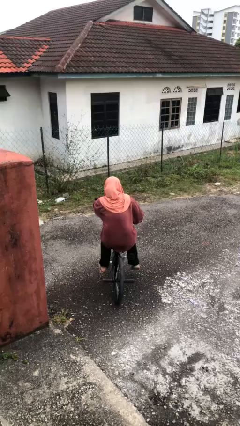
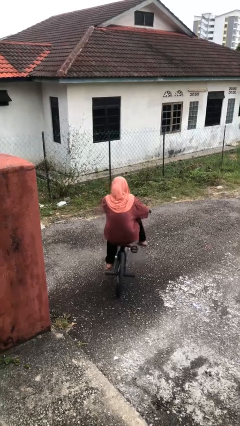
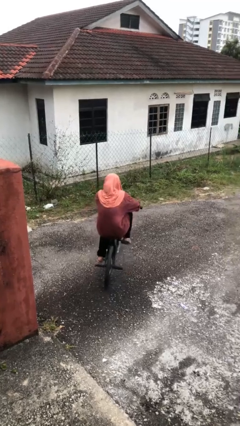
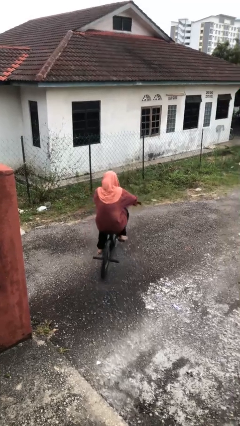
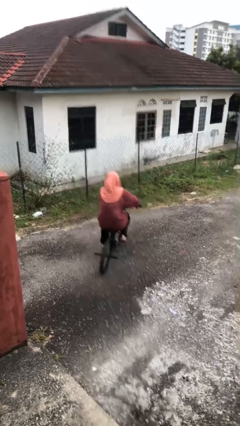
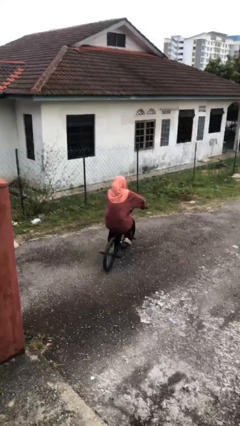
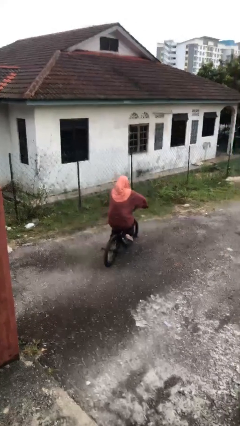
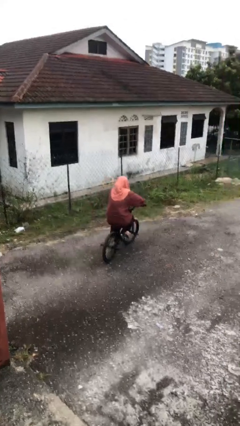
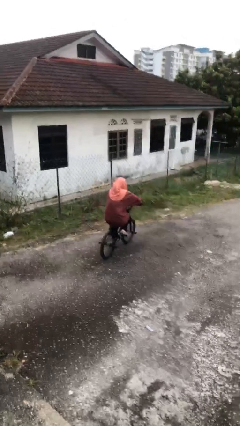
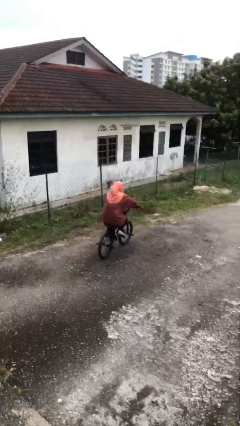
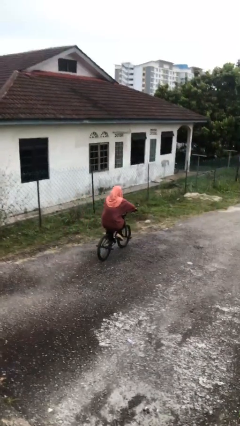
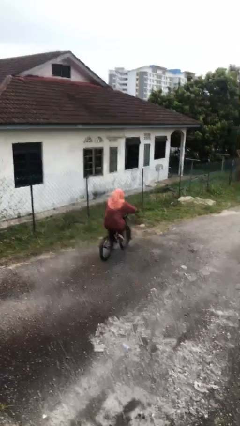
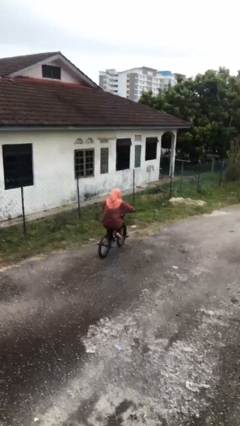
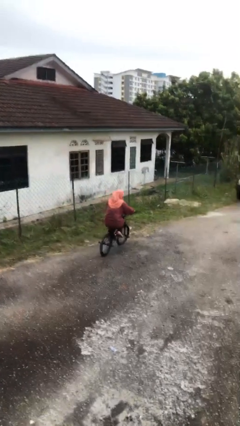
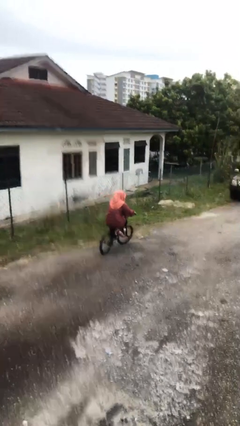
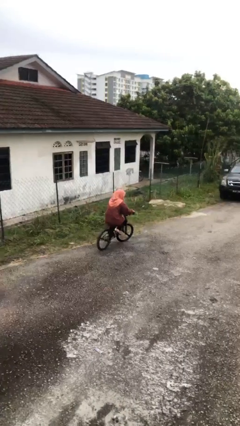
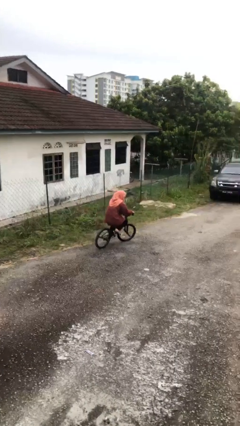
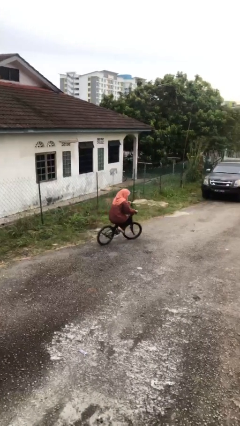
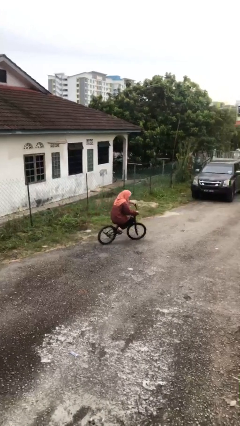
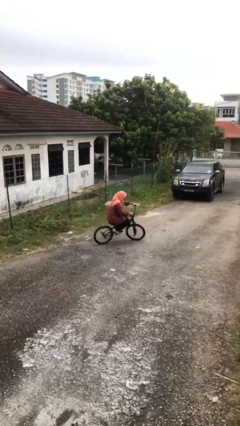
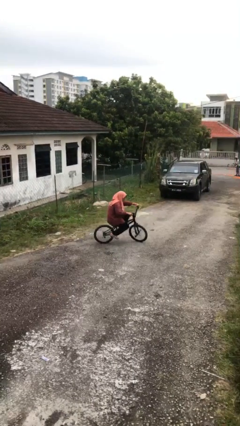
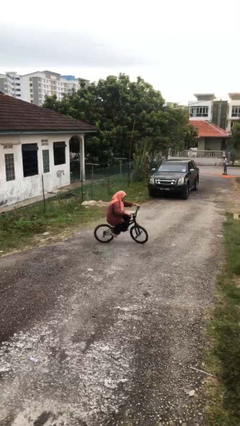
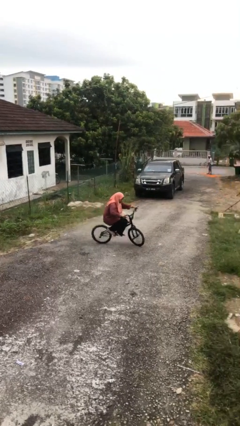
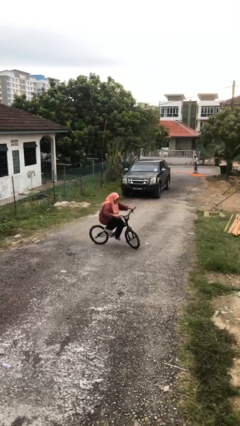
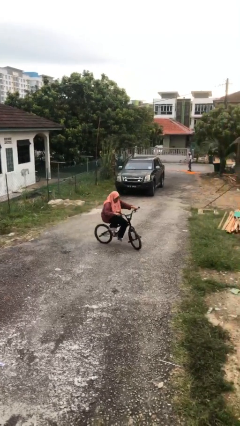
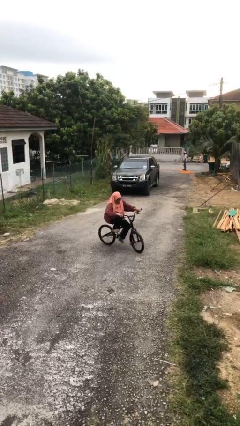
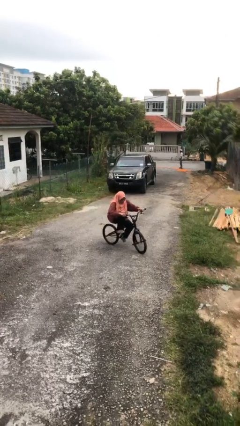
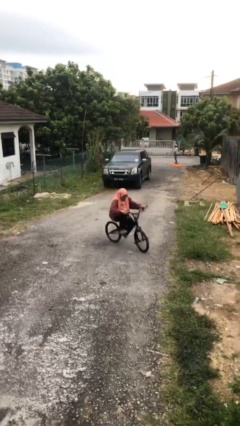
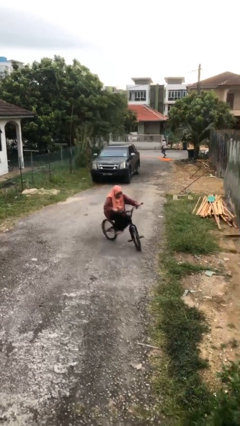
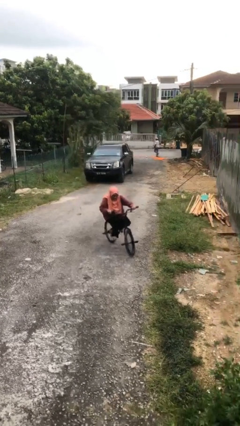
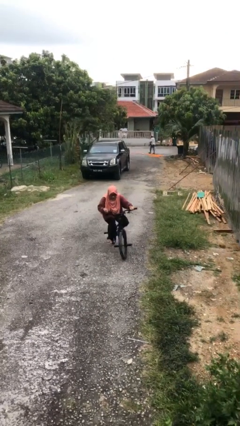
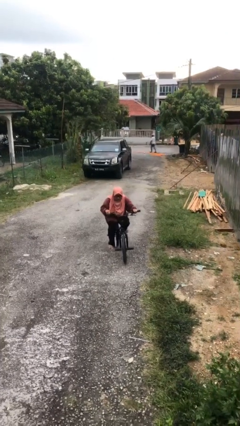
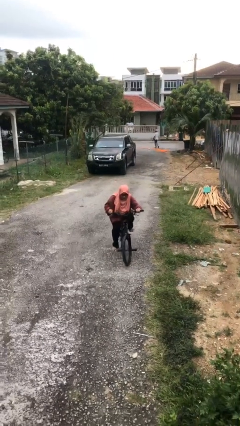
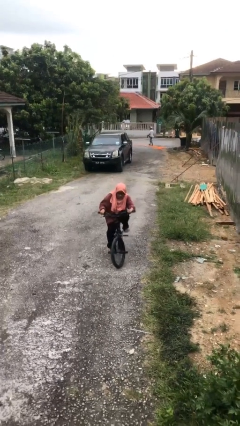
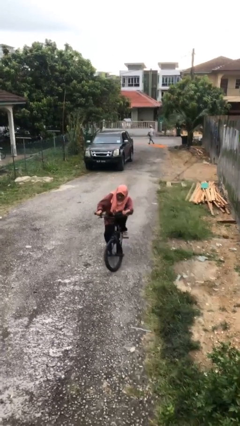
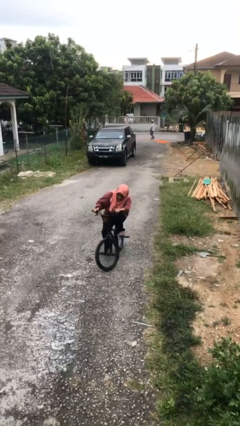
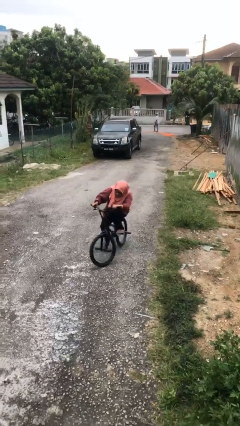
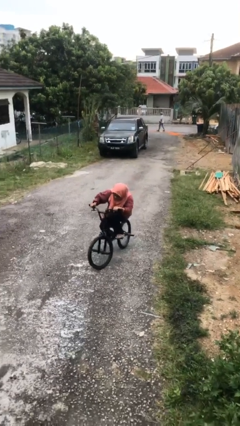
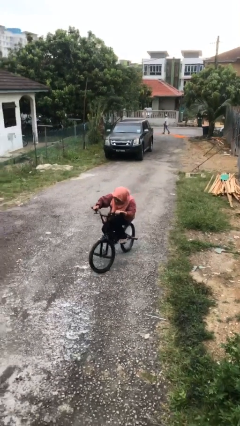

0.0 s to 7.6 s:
person rides bicycle

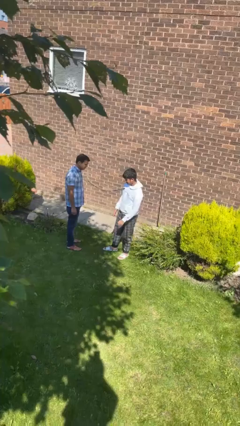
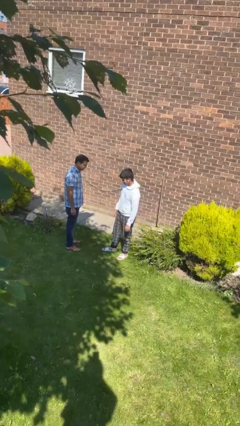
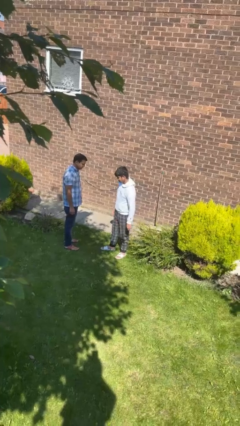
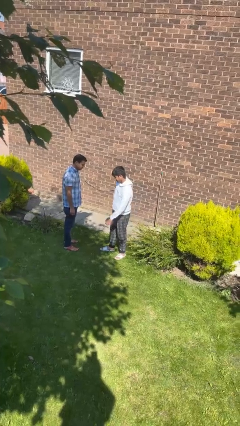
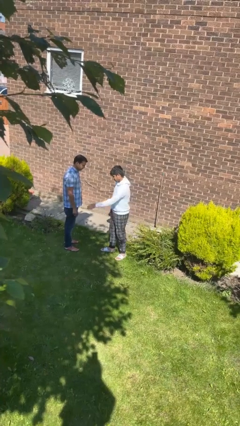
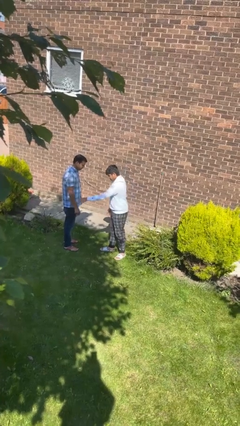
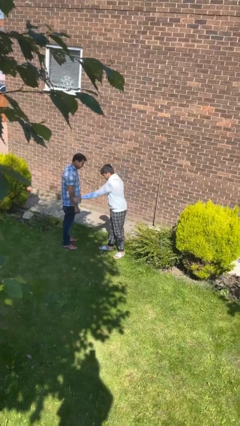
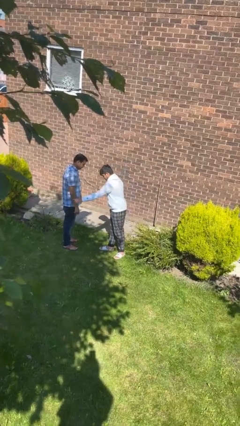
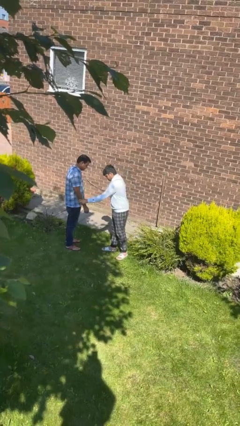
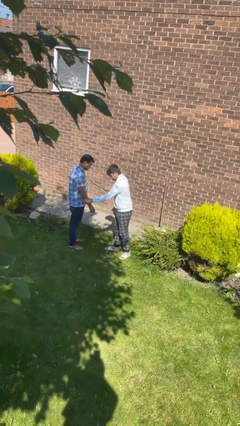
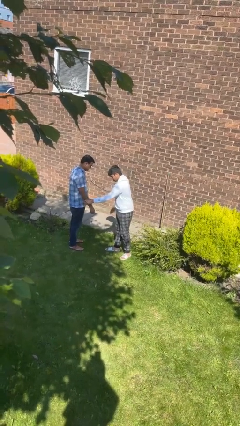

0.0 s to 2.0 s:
person grabs person by forearm

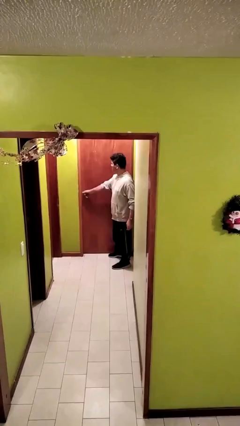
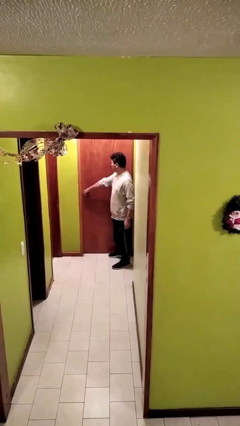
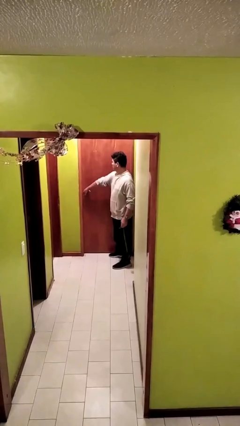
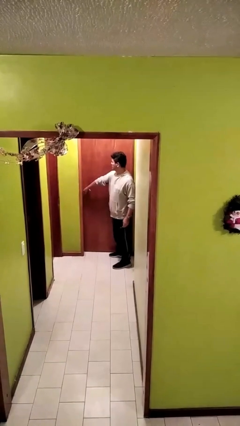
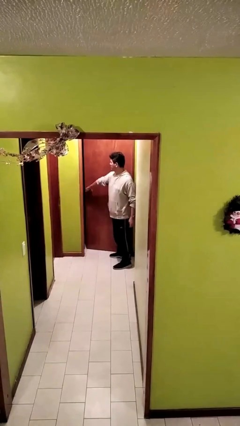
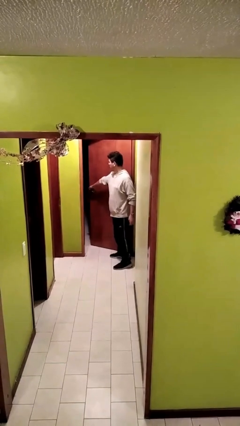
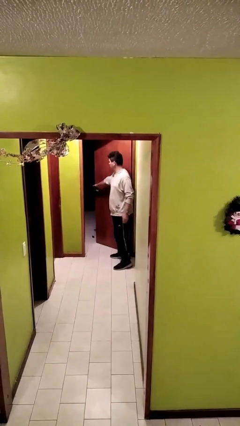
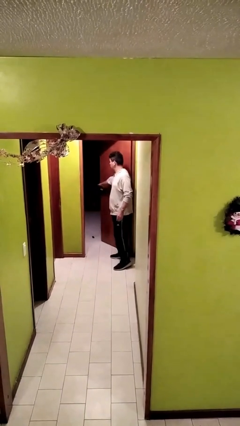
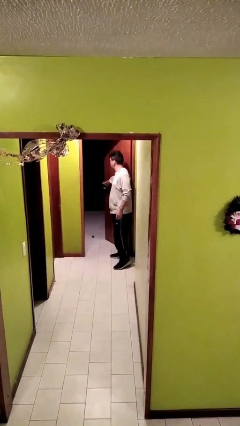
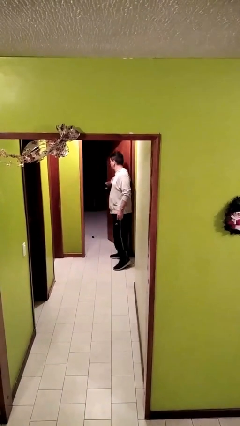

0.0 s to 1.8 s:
person opens facility door

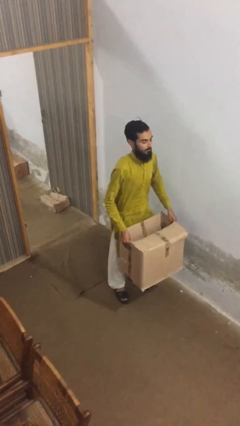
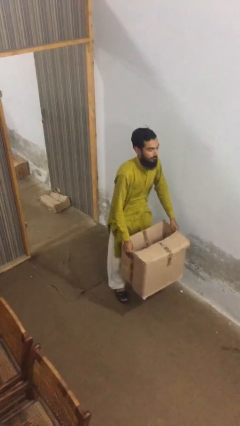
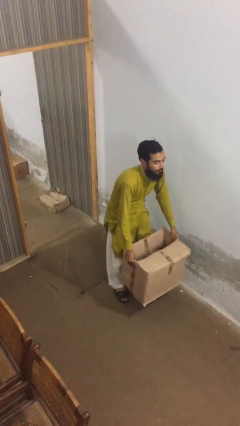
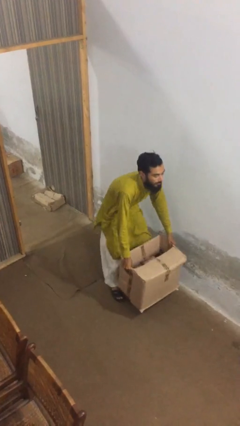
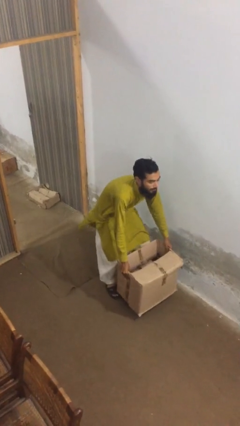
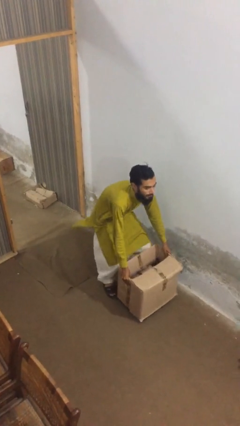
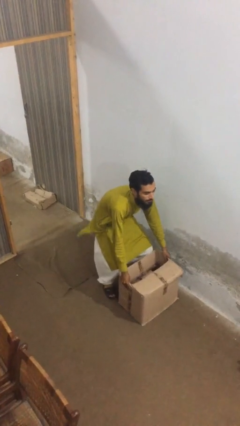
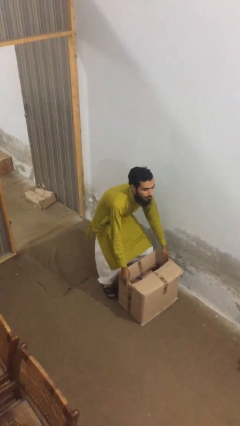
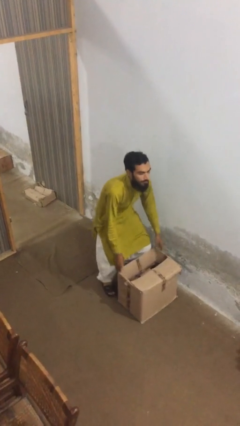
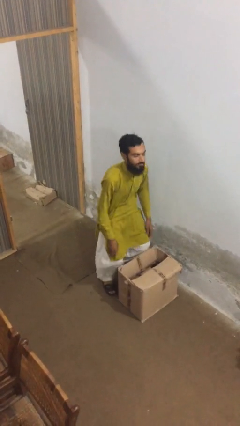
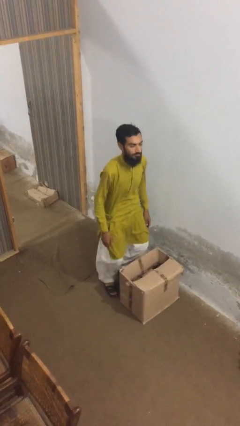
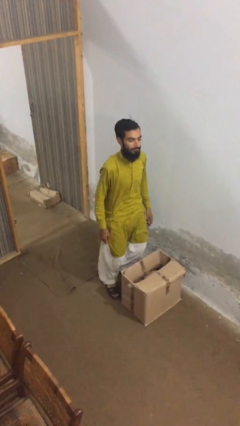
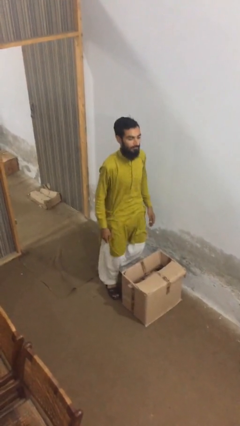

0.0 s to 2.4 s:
person puts down object on floor

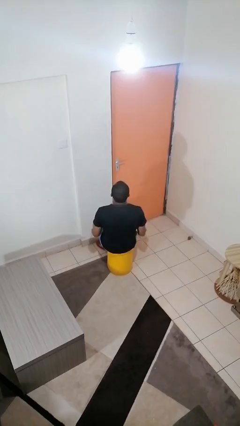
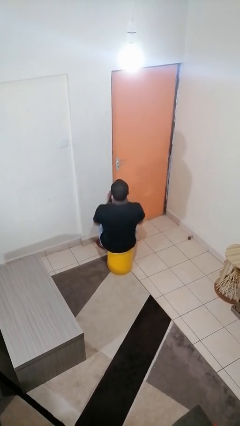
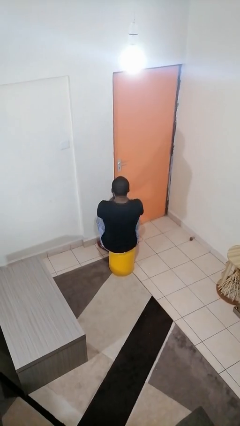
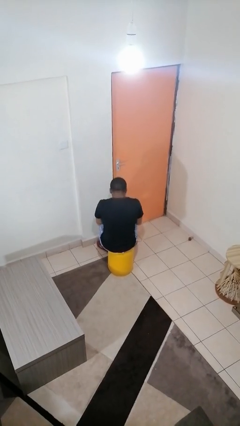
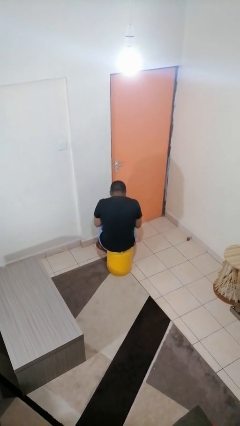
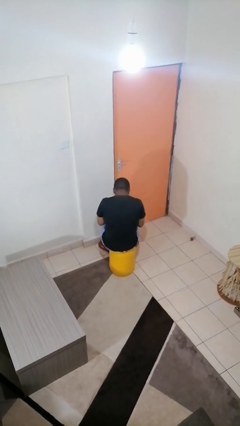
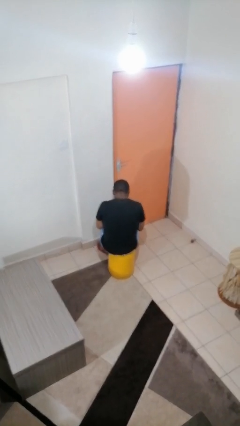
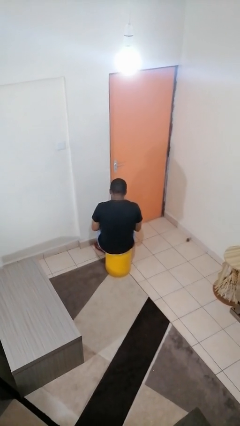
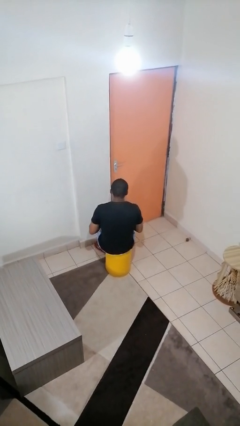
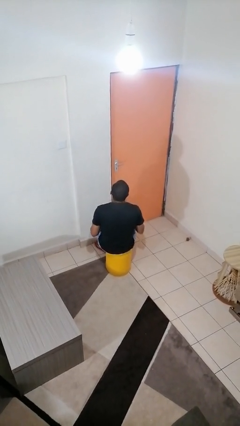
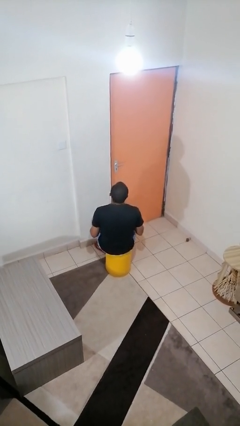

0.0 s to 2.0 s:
person sneezes into hand

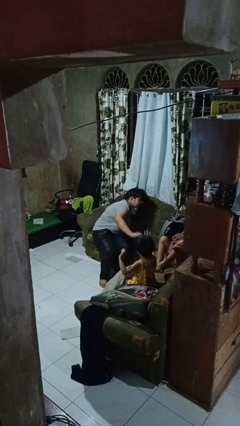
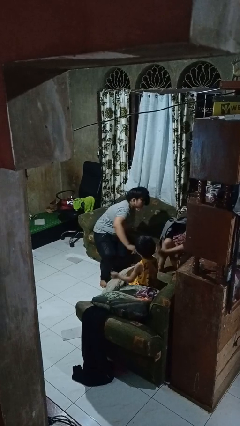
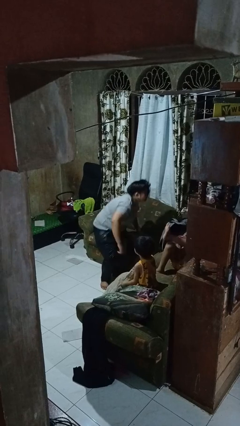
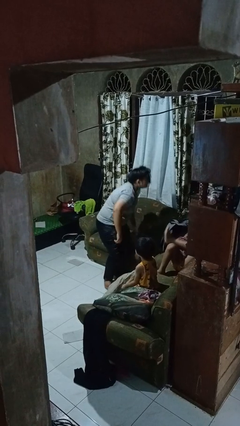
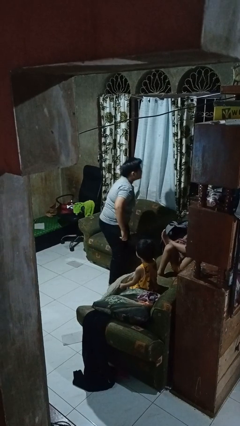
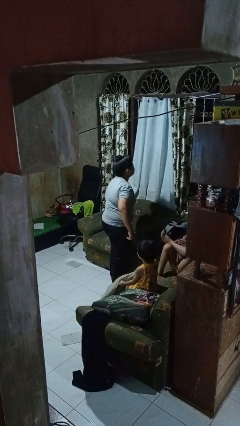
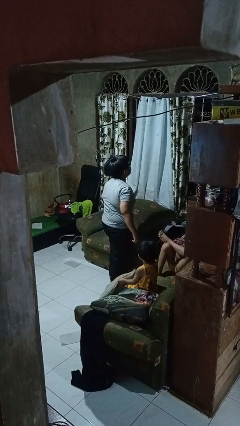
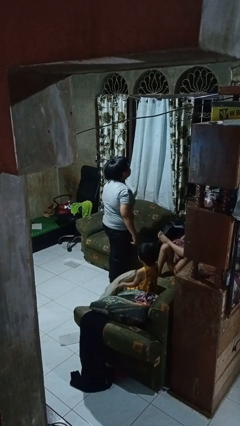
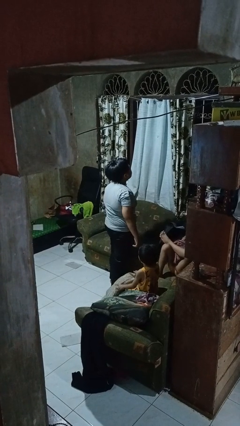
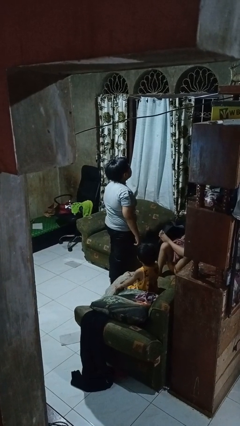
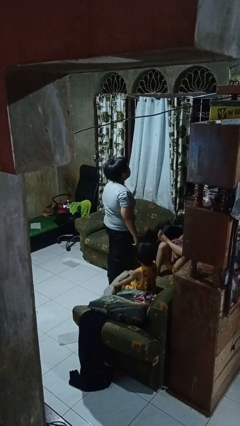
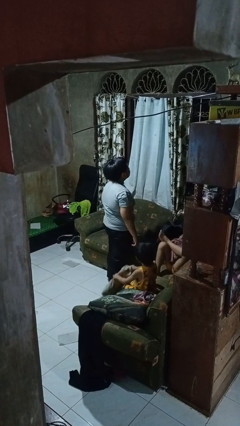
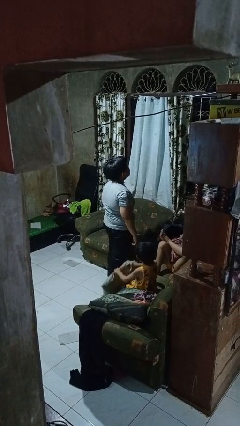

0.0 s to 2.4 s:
person stands up
